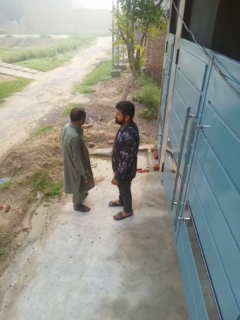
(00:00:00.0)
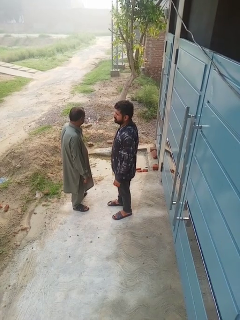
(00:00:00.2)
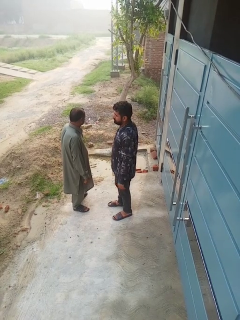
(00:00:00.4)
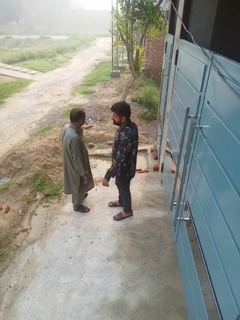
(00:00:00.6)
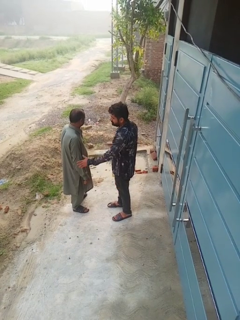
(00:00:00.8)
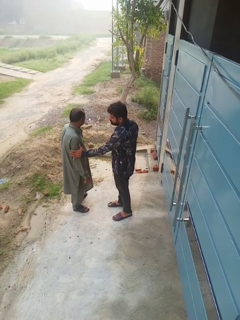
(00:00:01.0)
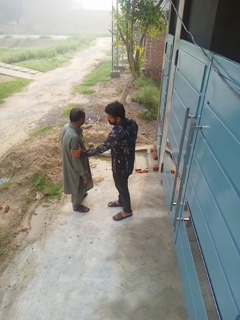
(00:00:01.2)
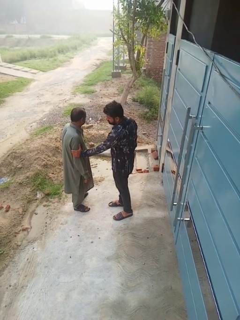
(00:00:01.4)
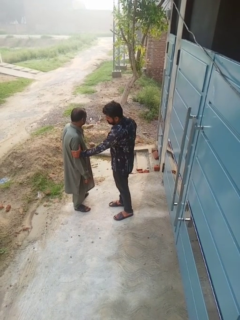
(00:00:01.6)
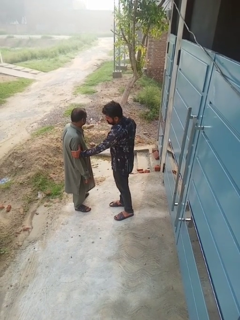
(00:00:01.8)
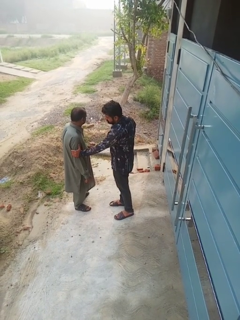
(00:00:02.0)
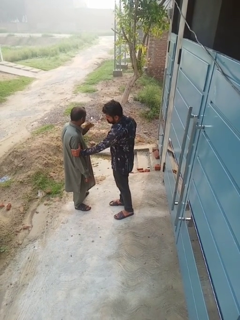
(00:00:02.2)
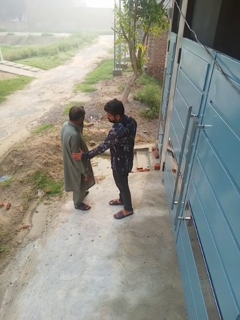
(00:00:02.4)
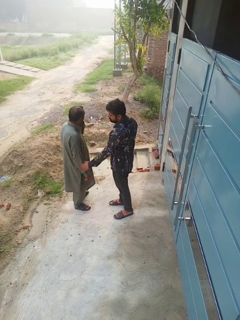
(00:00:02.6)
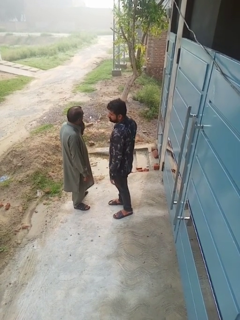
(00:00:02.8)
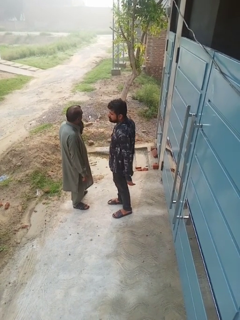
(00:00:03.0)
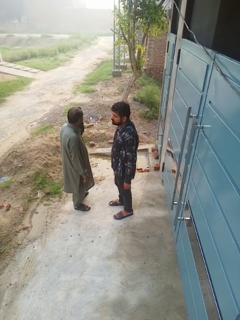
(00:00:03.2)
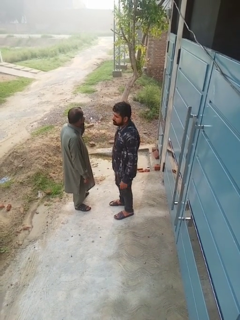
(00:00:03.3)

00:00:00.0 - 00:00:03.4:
person grabs person by bicep

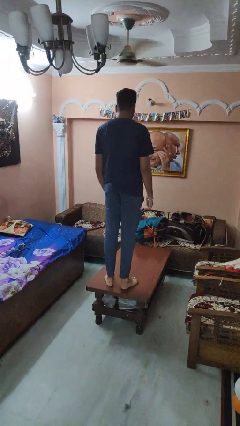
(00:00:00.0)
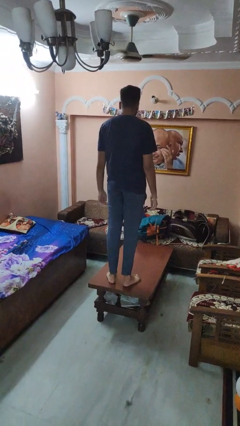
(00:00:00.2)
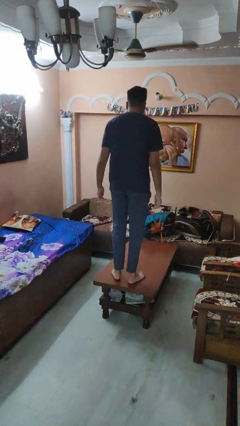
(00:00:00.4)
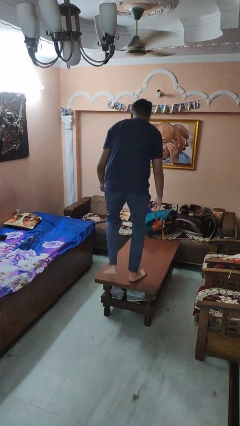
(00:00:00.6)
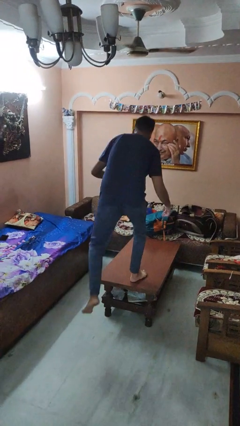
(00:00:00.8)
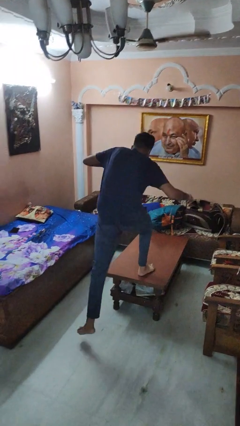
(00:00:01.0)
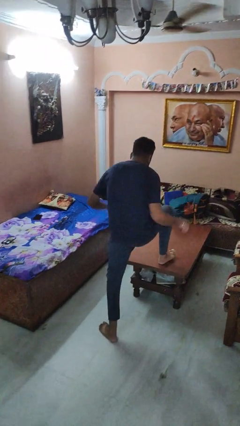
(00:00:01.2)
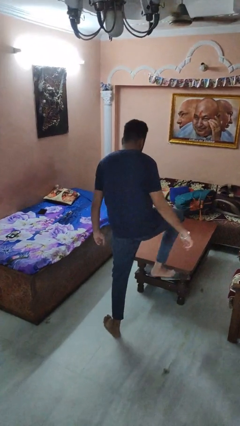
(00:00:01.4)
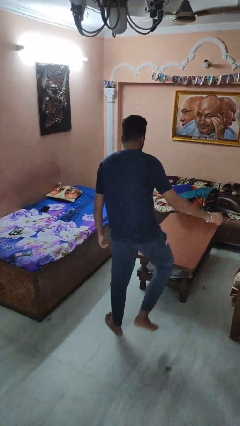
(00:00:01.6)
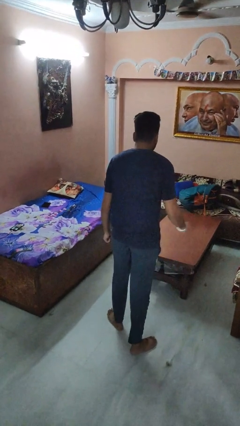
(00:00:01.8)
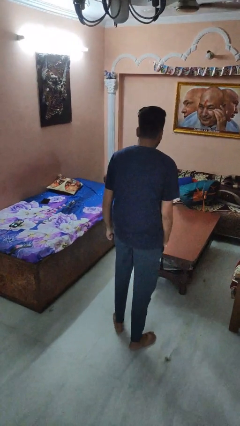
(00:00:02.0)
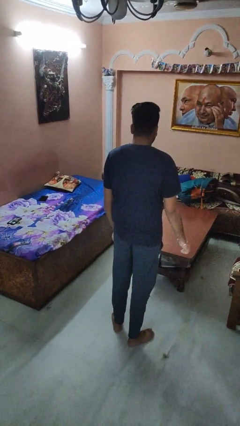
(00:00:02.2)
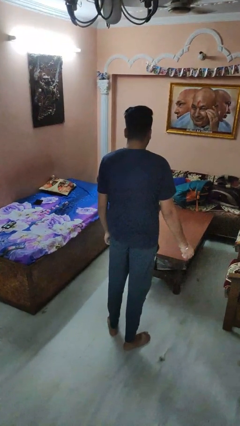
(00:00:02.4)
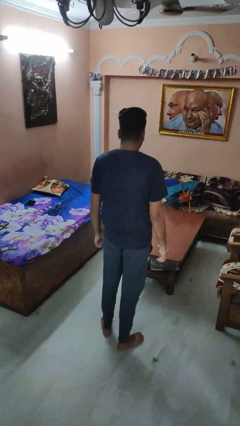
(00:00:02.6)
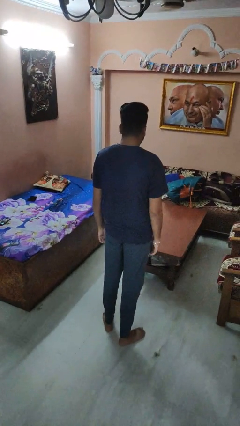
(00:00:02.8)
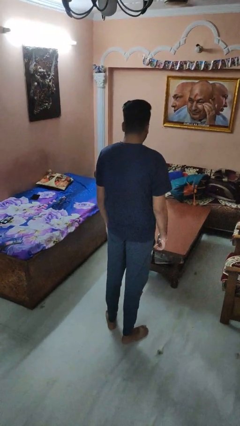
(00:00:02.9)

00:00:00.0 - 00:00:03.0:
person climbs off table

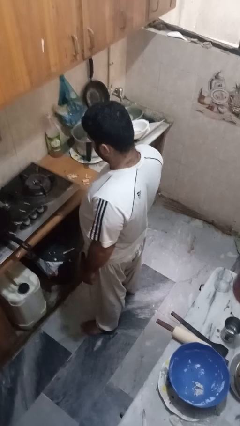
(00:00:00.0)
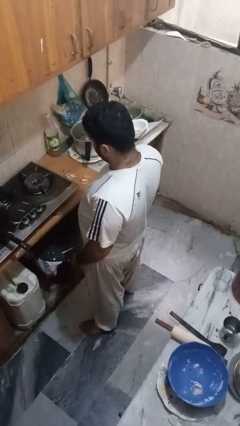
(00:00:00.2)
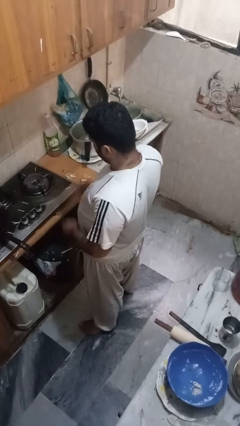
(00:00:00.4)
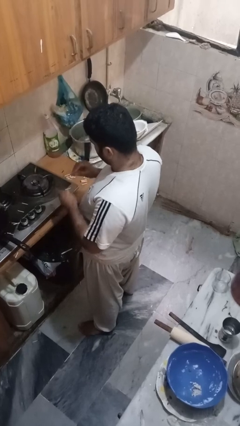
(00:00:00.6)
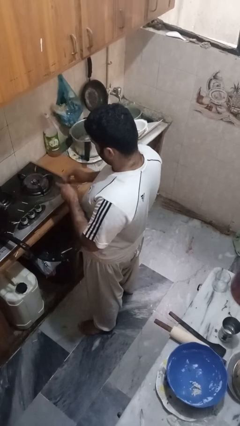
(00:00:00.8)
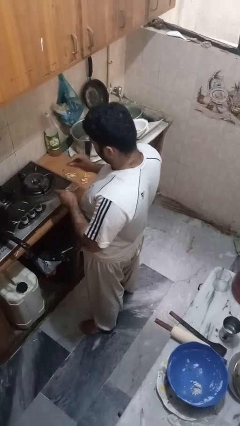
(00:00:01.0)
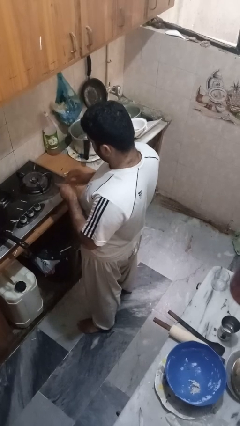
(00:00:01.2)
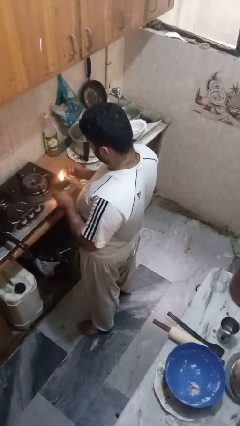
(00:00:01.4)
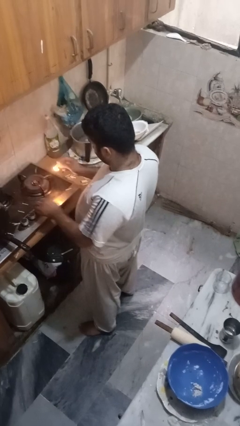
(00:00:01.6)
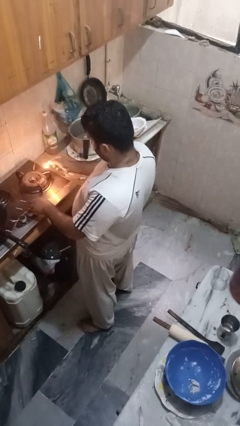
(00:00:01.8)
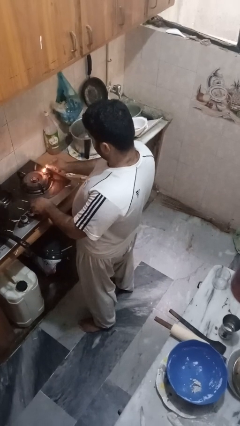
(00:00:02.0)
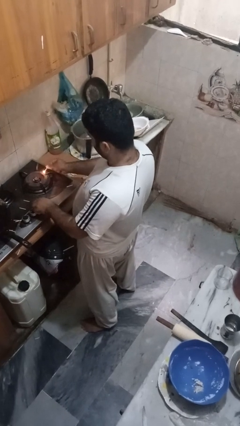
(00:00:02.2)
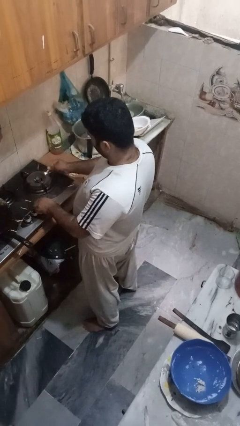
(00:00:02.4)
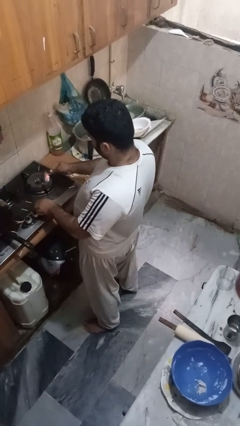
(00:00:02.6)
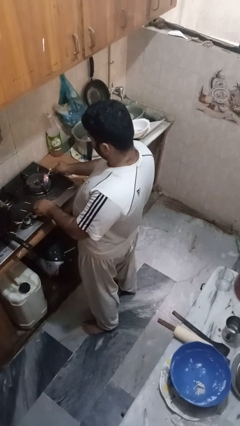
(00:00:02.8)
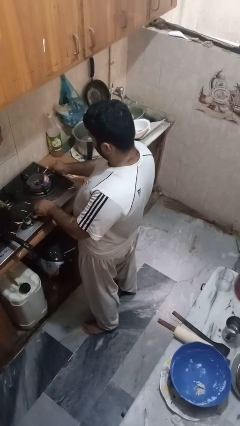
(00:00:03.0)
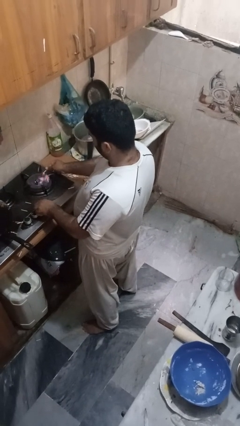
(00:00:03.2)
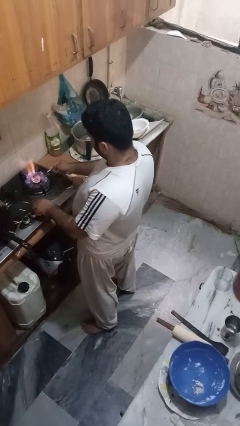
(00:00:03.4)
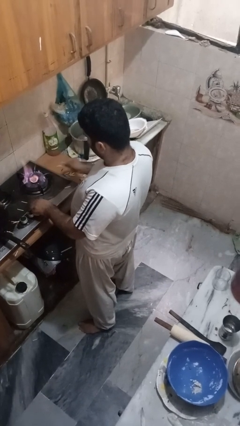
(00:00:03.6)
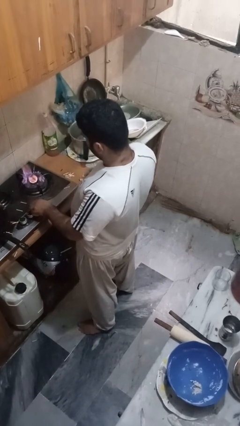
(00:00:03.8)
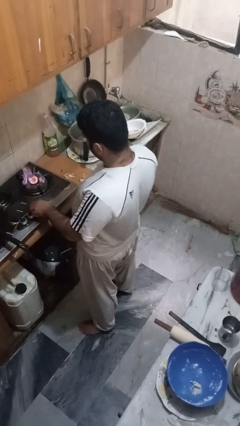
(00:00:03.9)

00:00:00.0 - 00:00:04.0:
person turns on stovetop

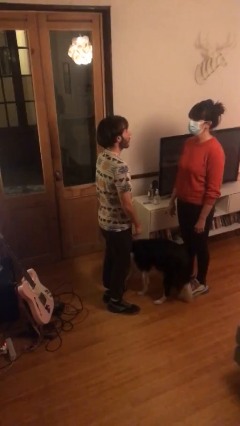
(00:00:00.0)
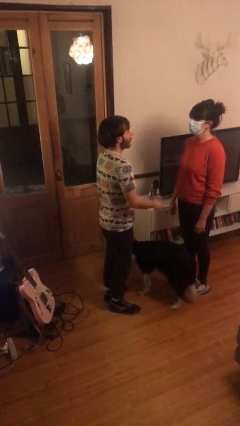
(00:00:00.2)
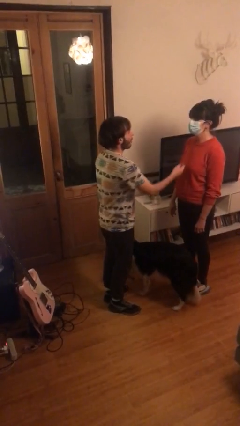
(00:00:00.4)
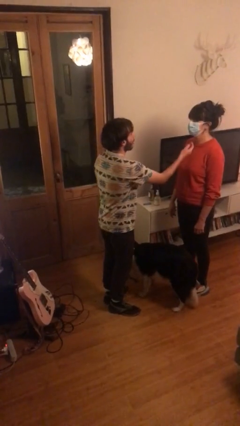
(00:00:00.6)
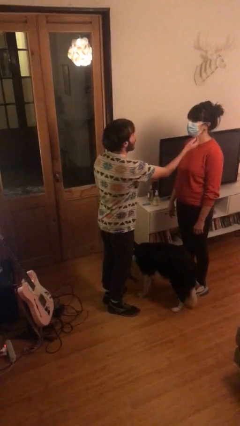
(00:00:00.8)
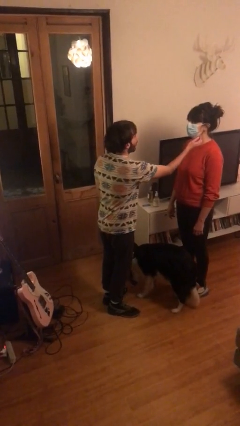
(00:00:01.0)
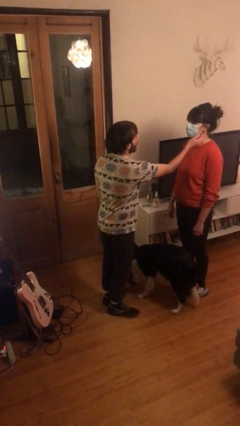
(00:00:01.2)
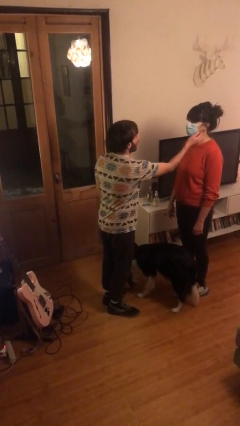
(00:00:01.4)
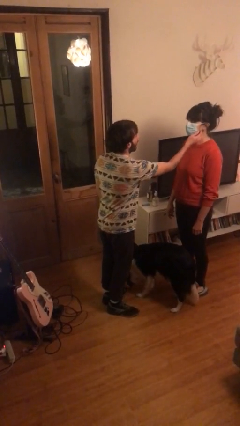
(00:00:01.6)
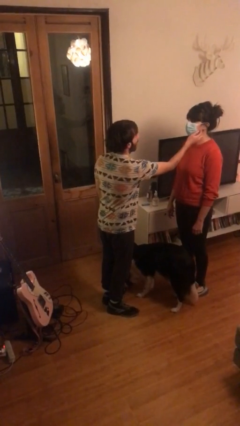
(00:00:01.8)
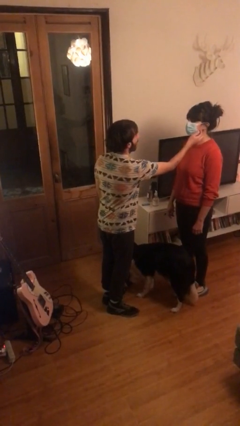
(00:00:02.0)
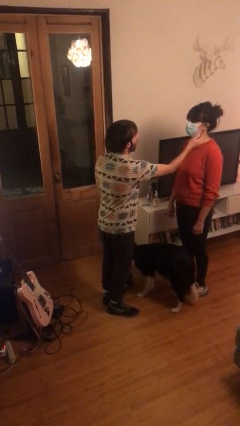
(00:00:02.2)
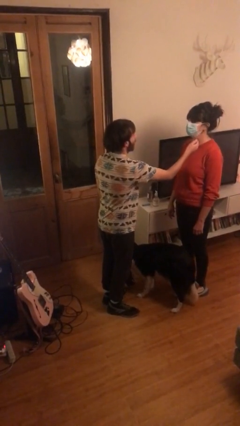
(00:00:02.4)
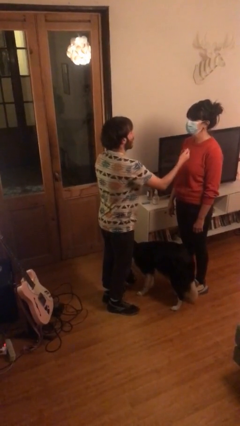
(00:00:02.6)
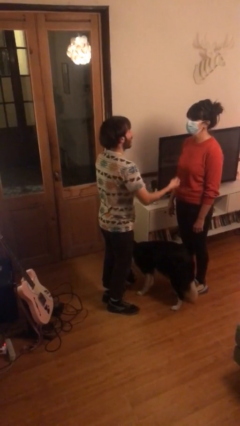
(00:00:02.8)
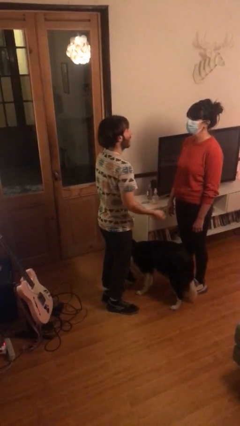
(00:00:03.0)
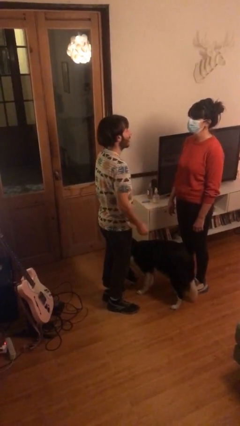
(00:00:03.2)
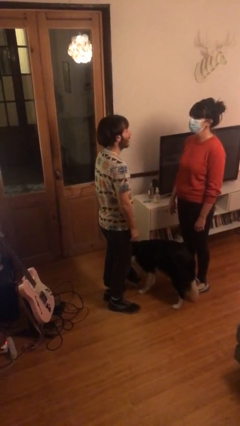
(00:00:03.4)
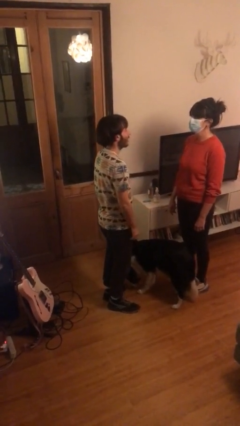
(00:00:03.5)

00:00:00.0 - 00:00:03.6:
person touches face of person

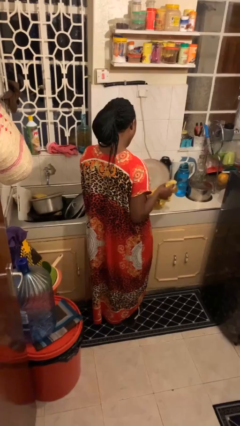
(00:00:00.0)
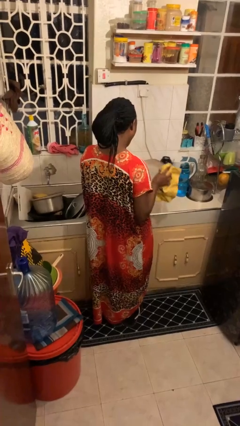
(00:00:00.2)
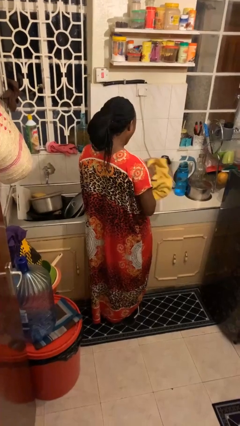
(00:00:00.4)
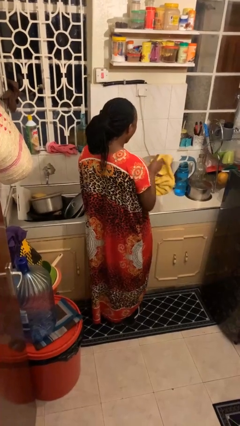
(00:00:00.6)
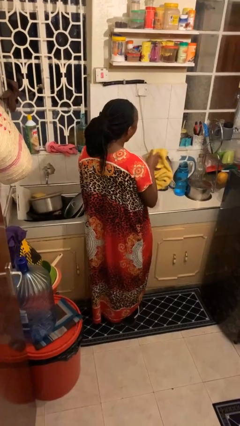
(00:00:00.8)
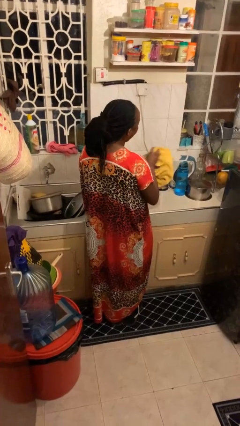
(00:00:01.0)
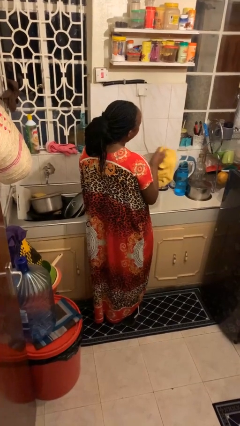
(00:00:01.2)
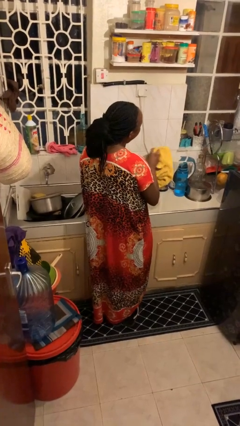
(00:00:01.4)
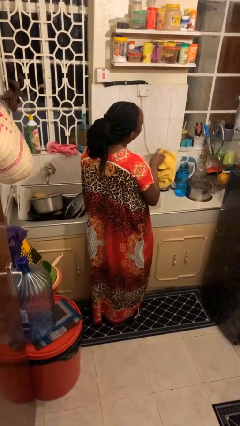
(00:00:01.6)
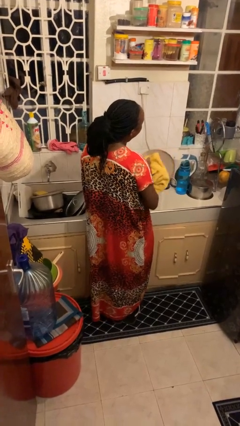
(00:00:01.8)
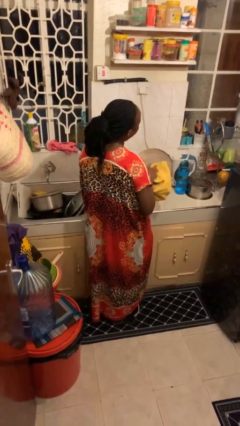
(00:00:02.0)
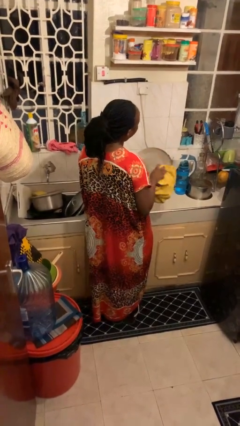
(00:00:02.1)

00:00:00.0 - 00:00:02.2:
person dries dish

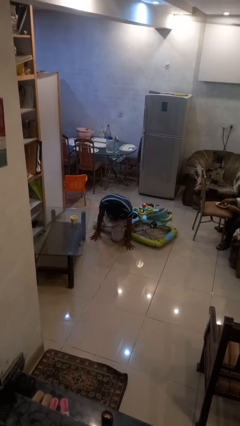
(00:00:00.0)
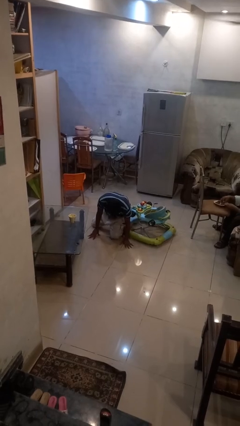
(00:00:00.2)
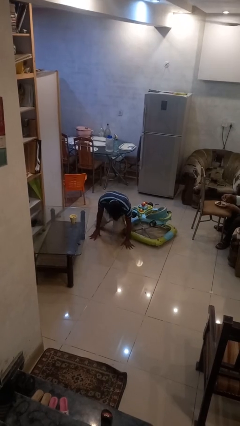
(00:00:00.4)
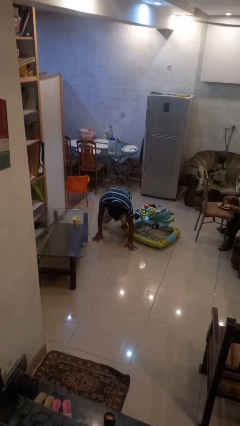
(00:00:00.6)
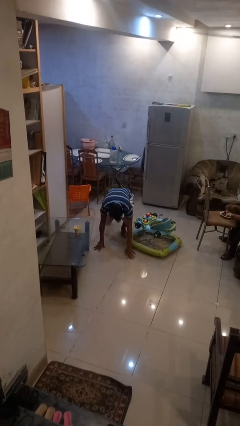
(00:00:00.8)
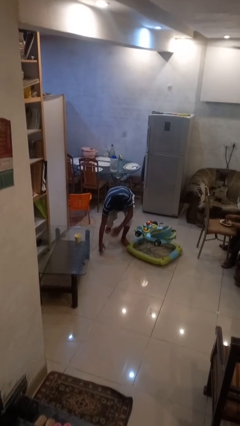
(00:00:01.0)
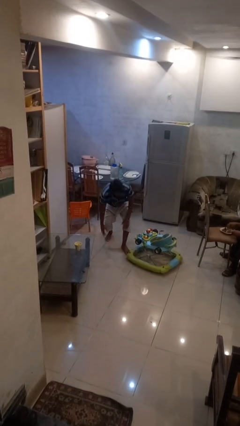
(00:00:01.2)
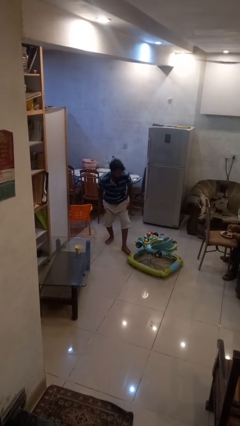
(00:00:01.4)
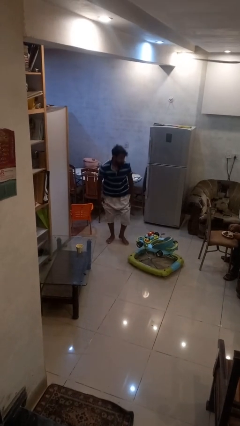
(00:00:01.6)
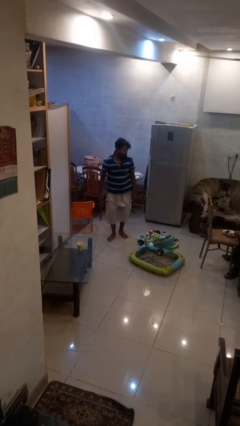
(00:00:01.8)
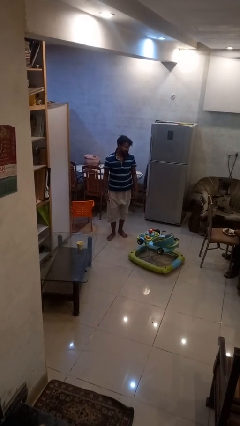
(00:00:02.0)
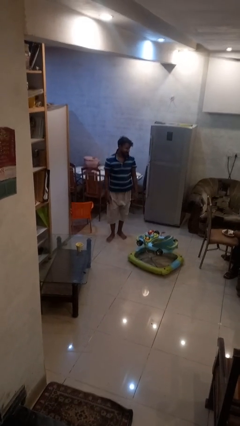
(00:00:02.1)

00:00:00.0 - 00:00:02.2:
person stands up from floor
